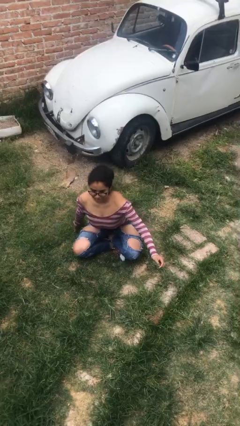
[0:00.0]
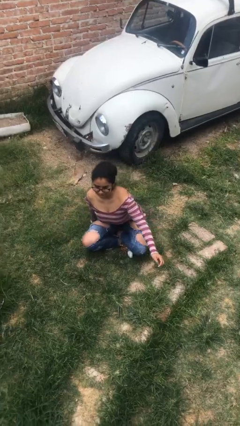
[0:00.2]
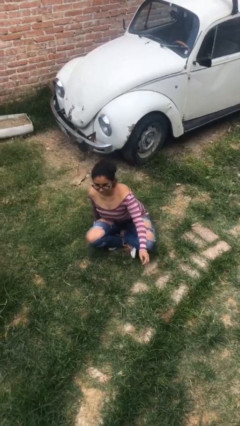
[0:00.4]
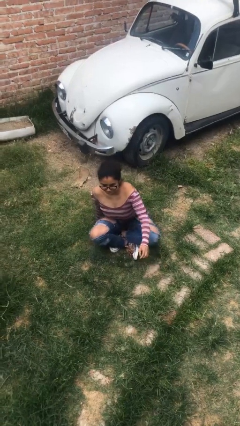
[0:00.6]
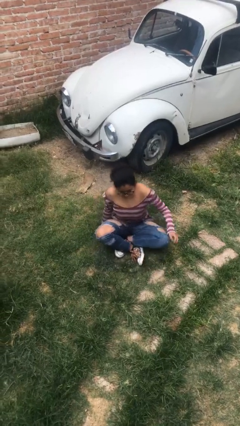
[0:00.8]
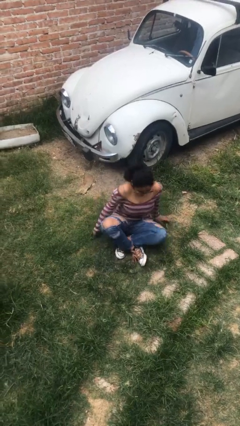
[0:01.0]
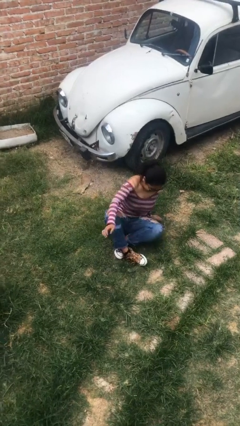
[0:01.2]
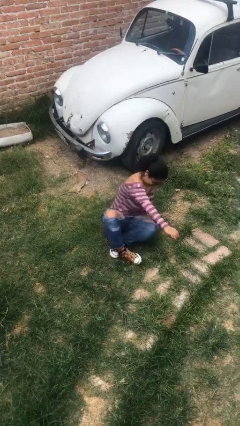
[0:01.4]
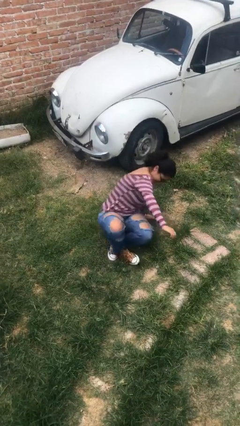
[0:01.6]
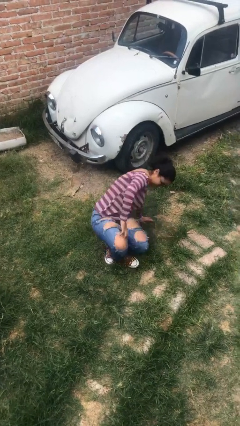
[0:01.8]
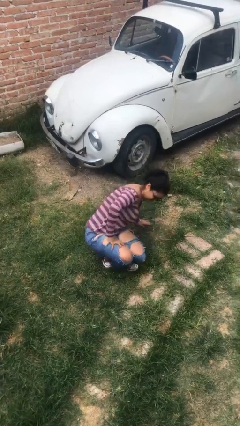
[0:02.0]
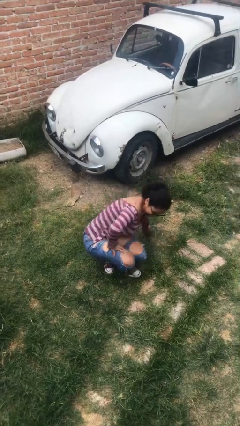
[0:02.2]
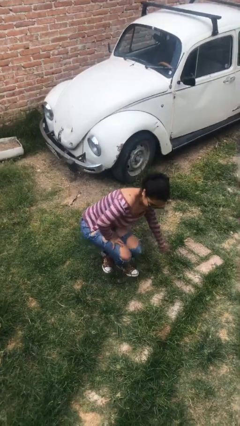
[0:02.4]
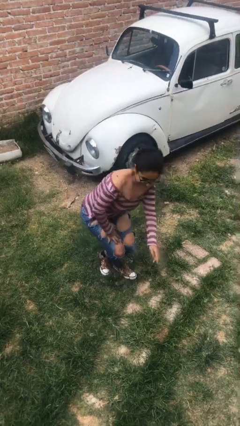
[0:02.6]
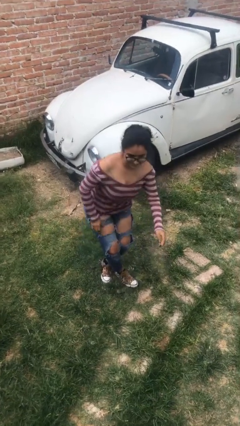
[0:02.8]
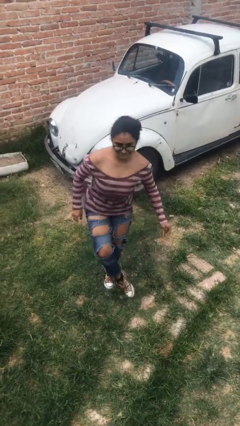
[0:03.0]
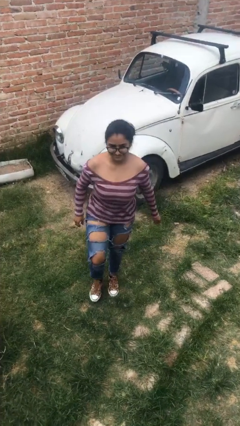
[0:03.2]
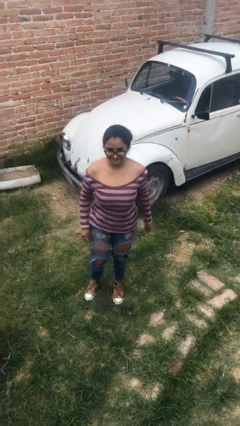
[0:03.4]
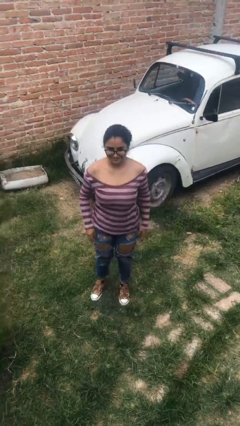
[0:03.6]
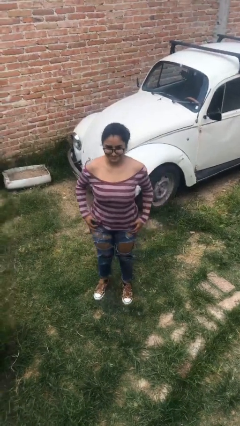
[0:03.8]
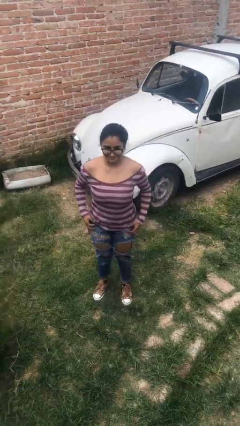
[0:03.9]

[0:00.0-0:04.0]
person stands up from floor

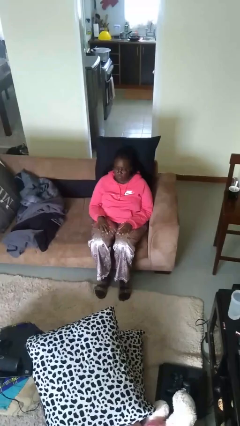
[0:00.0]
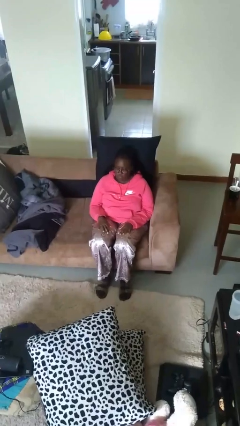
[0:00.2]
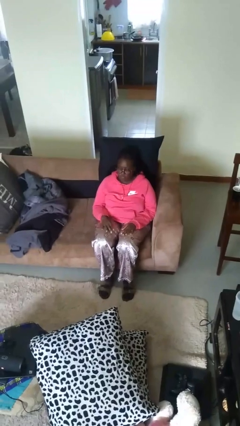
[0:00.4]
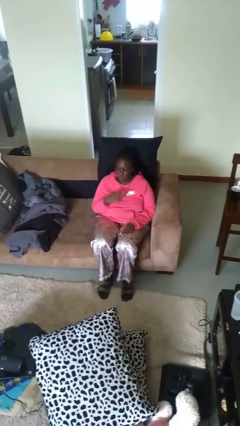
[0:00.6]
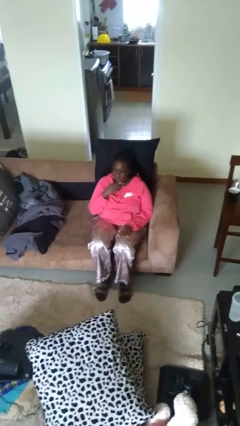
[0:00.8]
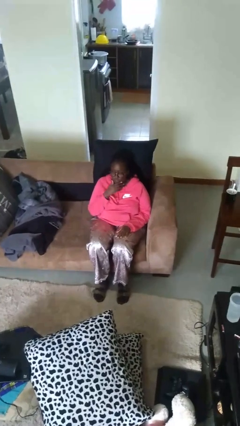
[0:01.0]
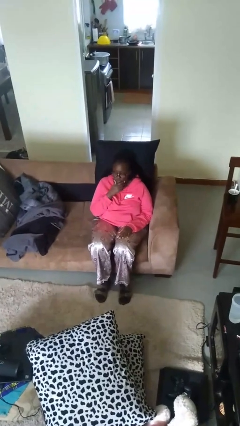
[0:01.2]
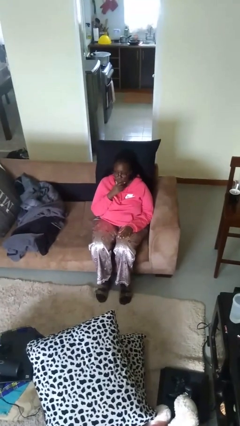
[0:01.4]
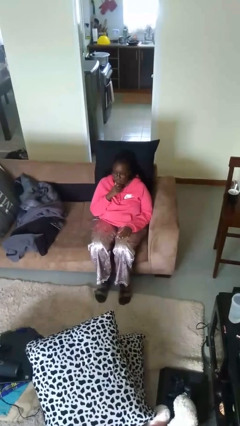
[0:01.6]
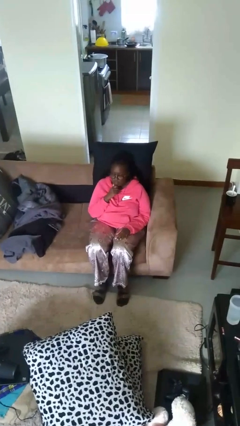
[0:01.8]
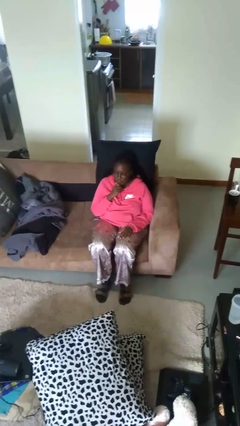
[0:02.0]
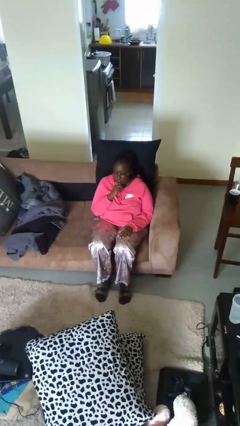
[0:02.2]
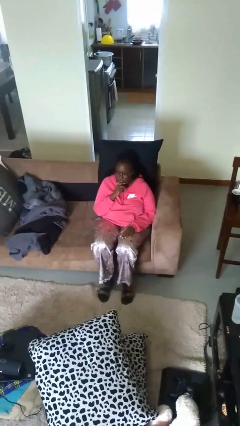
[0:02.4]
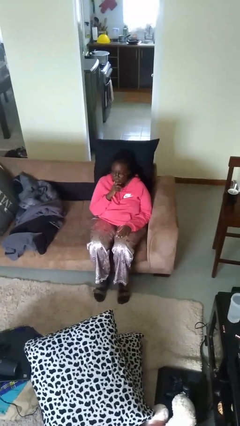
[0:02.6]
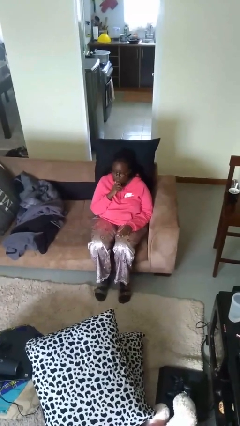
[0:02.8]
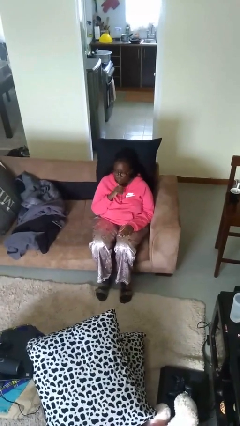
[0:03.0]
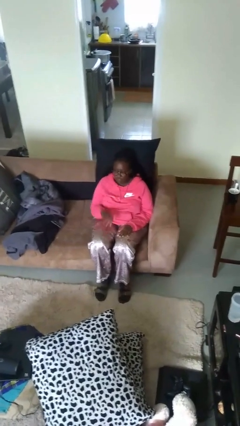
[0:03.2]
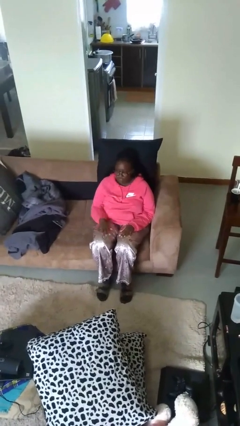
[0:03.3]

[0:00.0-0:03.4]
person strokes chin

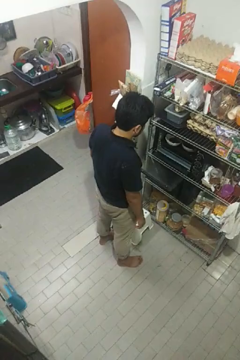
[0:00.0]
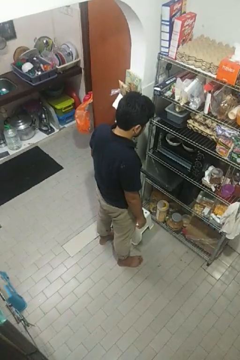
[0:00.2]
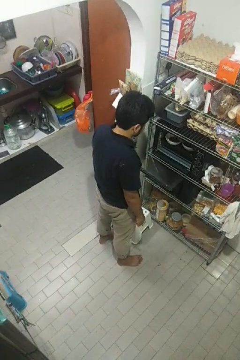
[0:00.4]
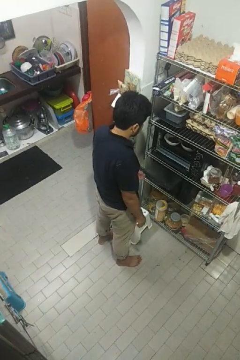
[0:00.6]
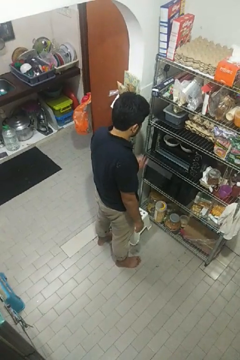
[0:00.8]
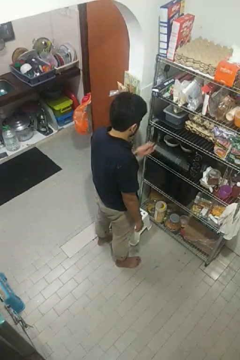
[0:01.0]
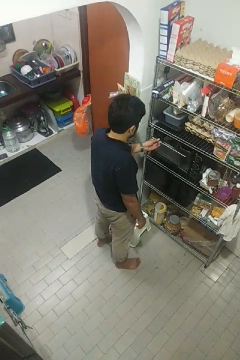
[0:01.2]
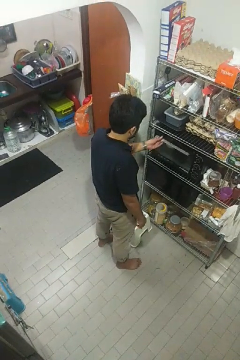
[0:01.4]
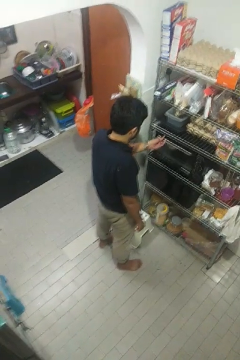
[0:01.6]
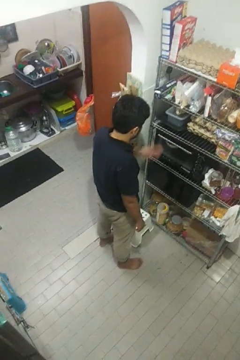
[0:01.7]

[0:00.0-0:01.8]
person closes oven door

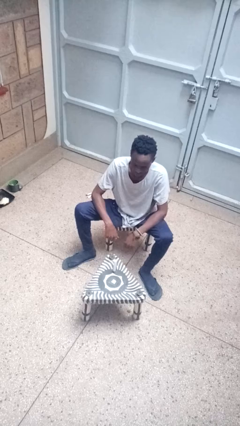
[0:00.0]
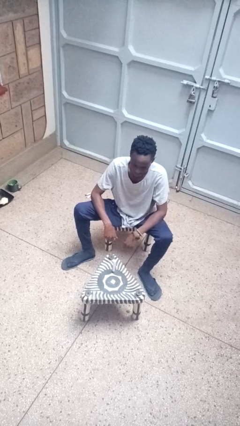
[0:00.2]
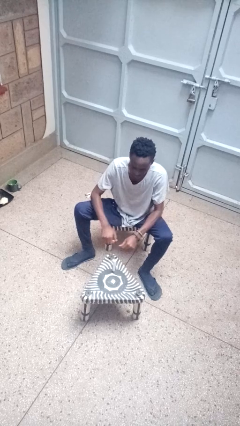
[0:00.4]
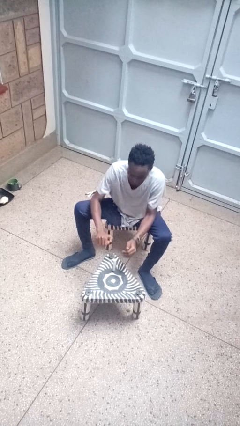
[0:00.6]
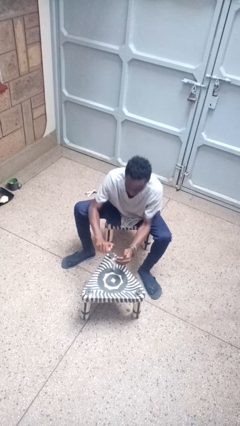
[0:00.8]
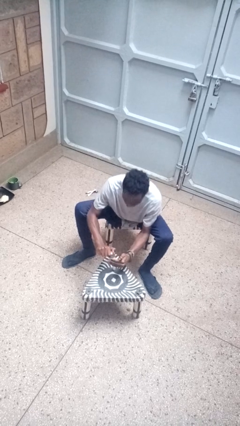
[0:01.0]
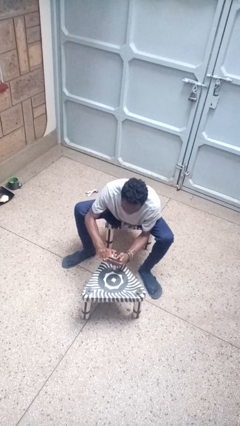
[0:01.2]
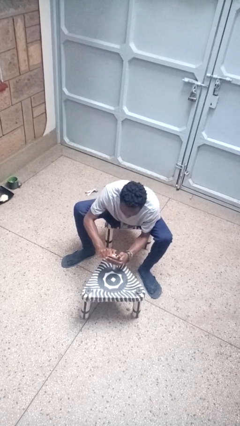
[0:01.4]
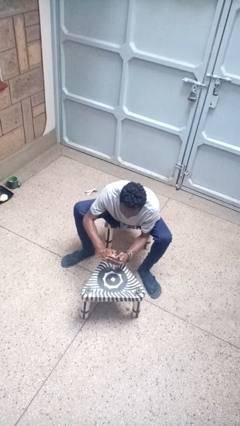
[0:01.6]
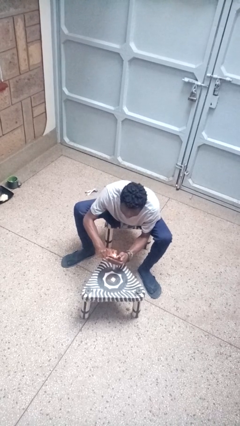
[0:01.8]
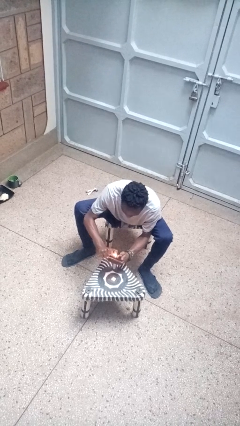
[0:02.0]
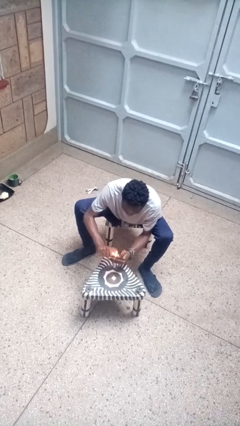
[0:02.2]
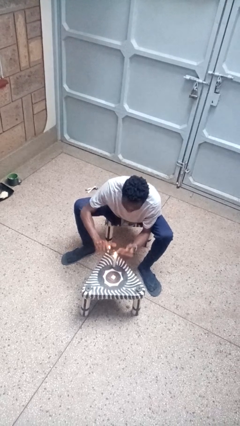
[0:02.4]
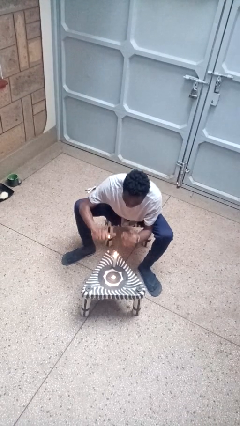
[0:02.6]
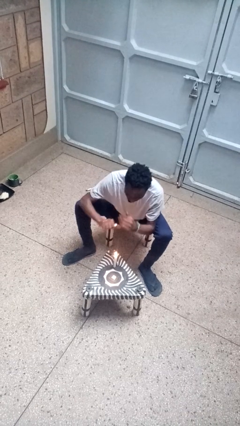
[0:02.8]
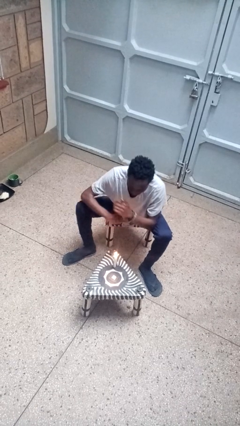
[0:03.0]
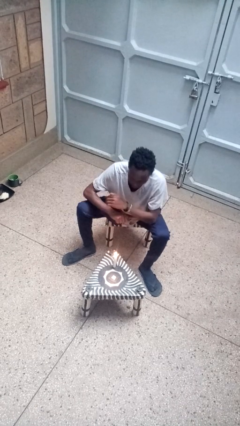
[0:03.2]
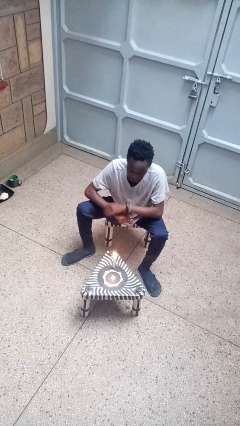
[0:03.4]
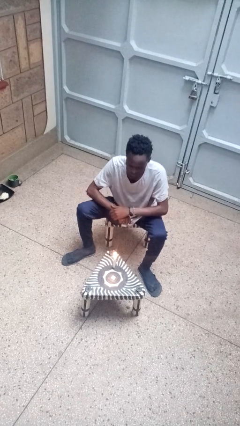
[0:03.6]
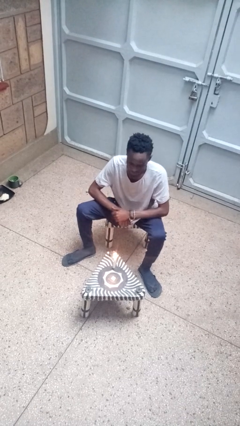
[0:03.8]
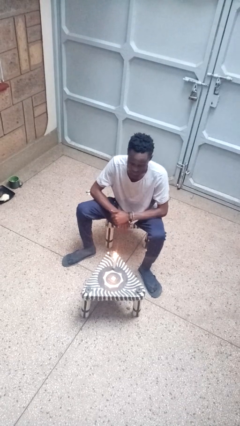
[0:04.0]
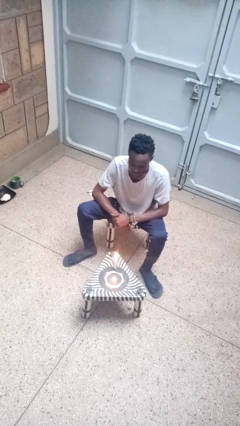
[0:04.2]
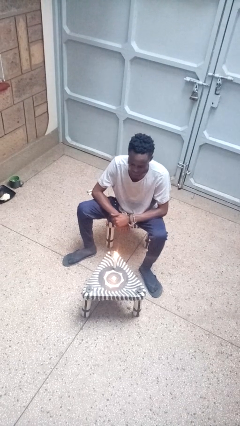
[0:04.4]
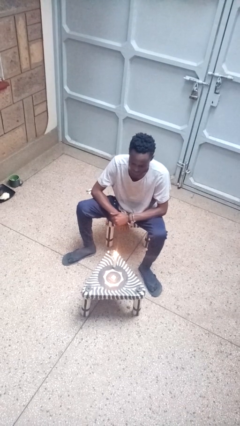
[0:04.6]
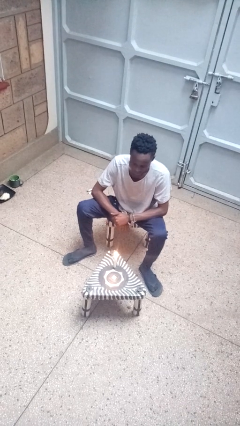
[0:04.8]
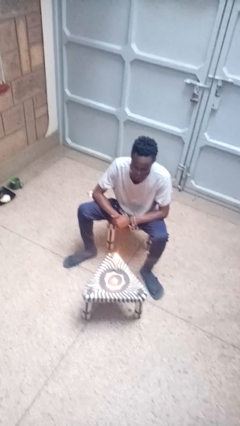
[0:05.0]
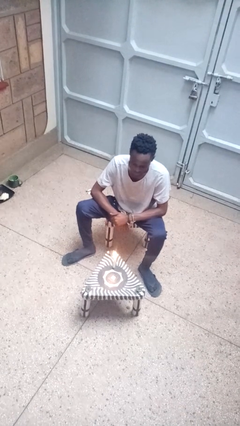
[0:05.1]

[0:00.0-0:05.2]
person lights candle

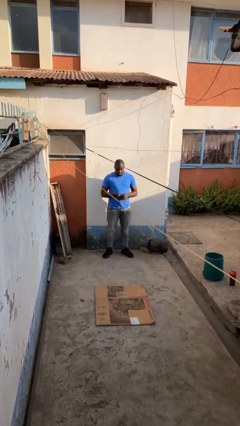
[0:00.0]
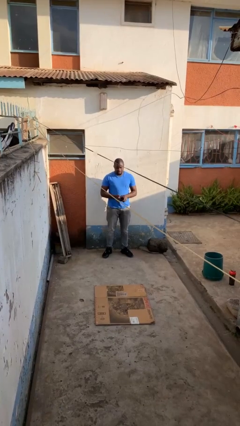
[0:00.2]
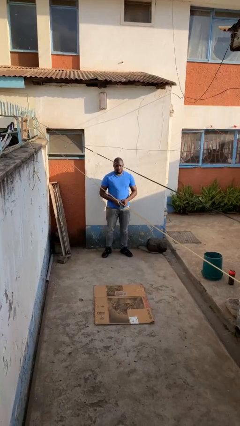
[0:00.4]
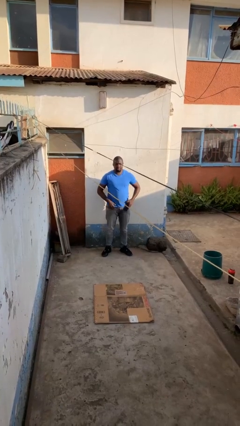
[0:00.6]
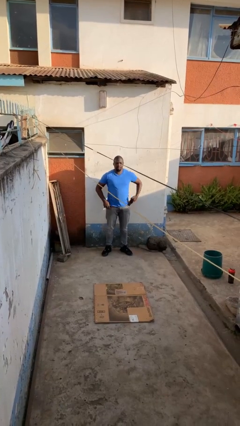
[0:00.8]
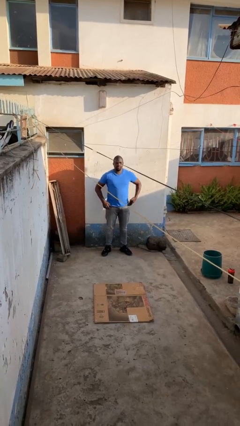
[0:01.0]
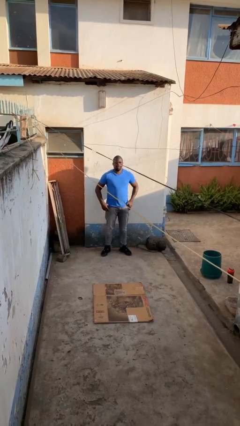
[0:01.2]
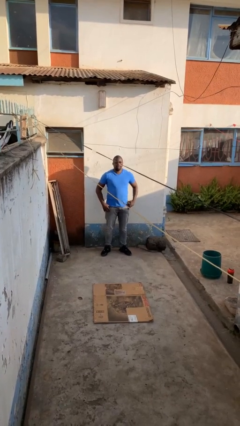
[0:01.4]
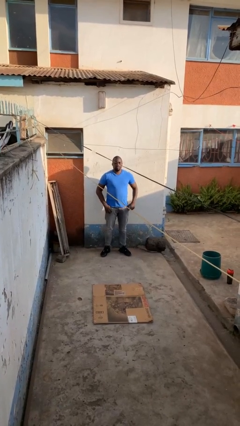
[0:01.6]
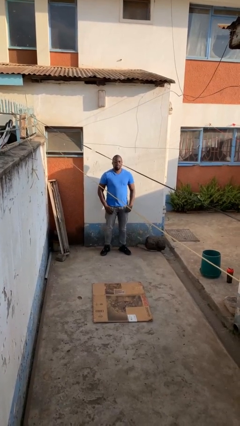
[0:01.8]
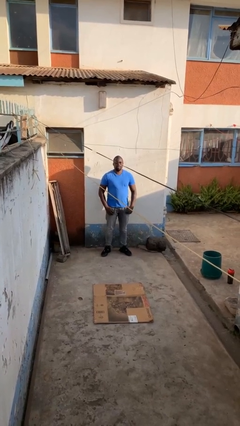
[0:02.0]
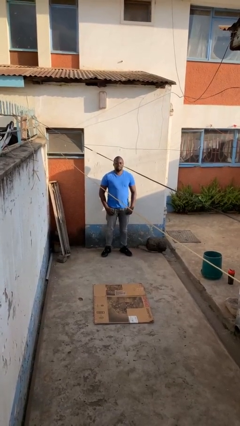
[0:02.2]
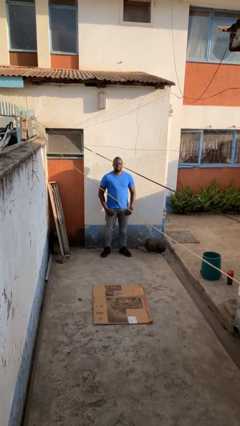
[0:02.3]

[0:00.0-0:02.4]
person puts phone into pocket

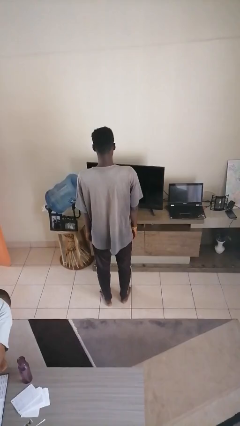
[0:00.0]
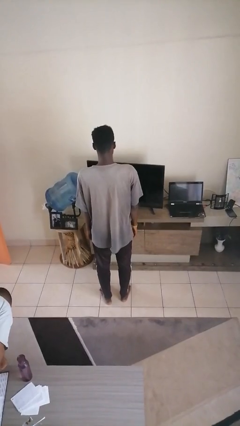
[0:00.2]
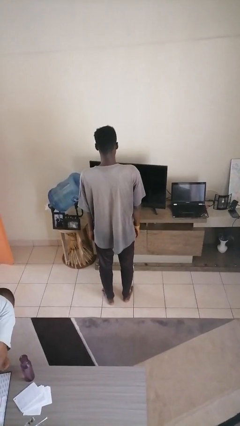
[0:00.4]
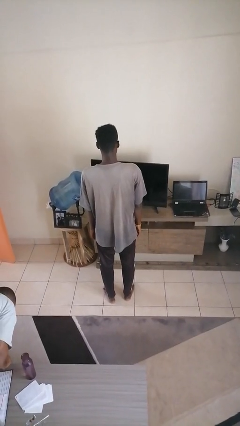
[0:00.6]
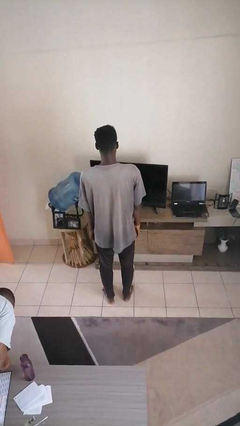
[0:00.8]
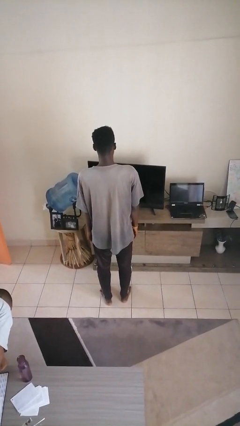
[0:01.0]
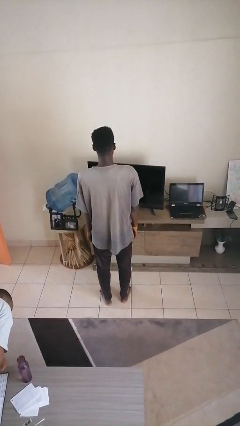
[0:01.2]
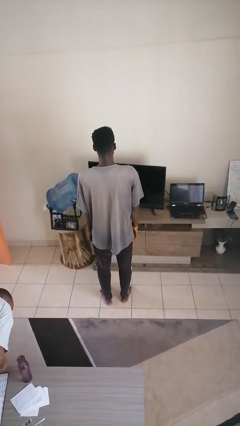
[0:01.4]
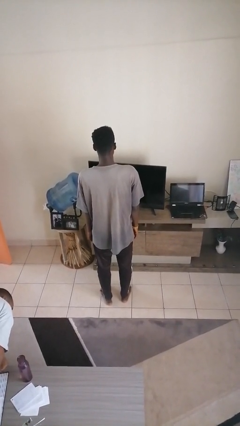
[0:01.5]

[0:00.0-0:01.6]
person gestures lower hand
